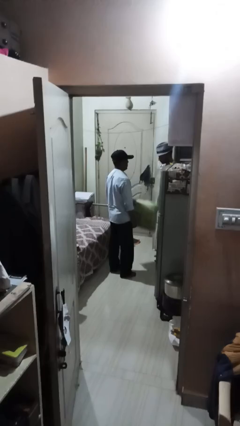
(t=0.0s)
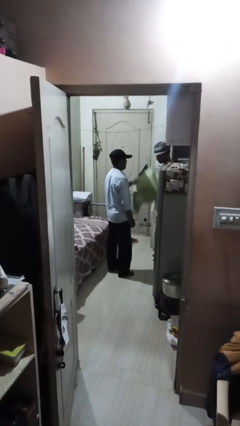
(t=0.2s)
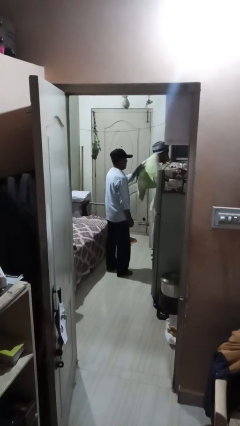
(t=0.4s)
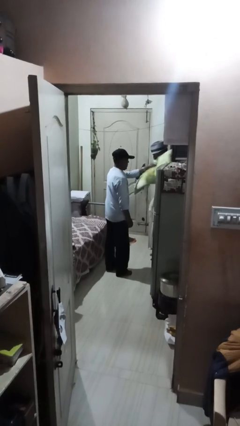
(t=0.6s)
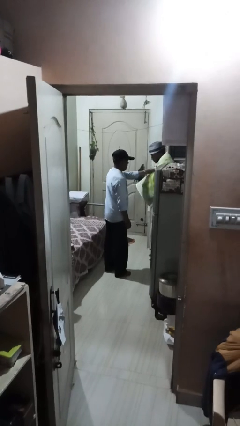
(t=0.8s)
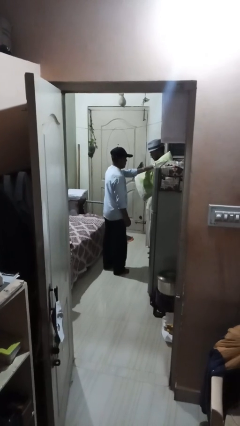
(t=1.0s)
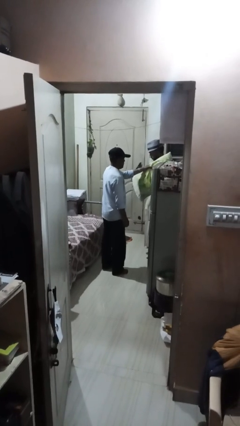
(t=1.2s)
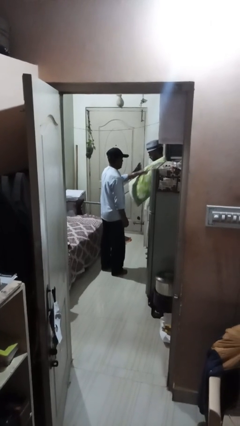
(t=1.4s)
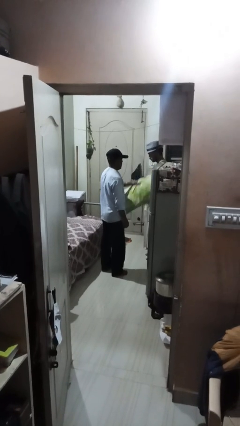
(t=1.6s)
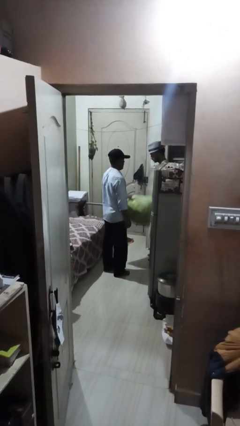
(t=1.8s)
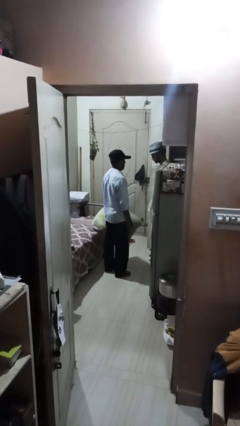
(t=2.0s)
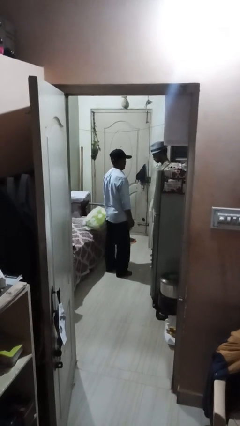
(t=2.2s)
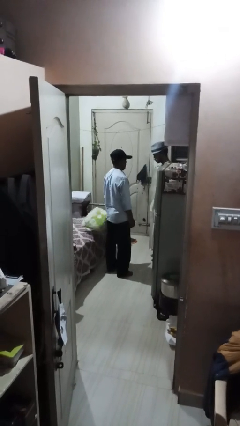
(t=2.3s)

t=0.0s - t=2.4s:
person hits person with pillow

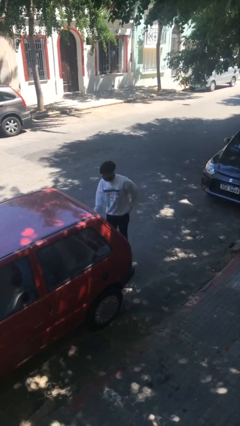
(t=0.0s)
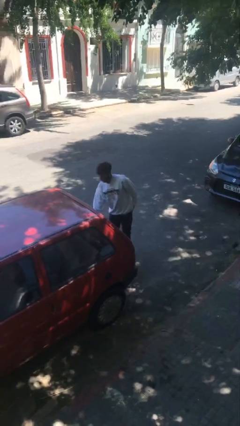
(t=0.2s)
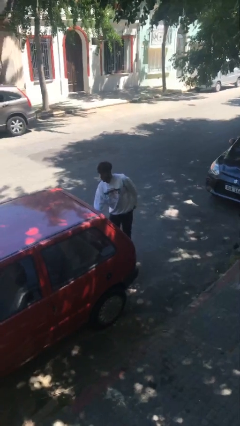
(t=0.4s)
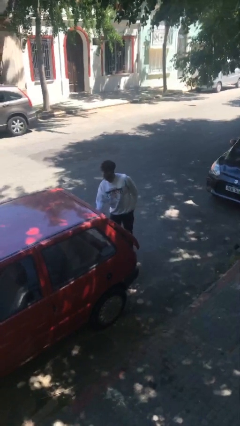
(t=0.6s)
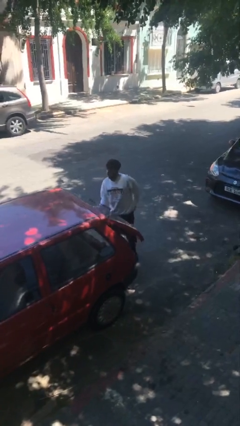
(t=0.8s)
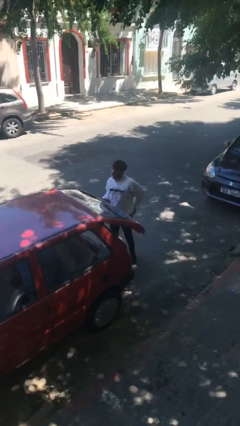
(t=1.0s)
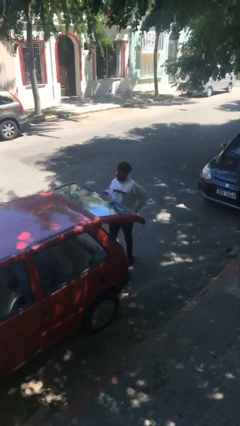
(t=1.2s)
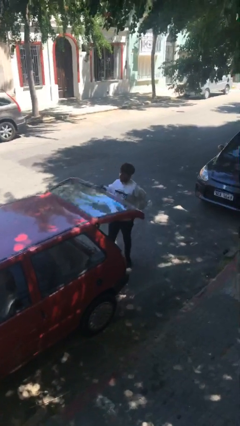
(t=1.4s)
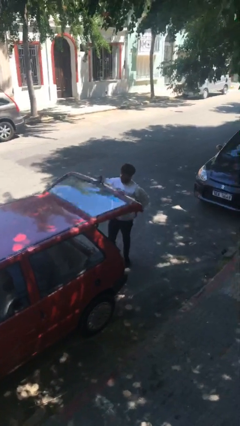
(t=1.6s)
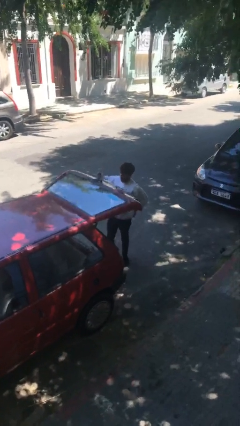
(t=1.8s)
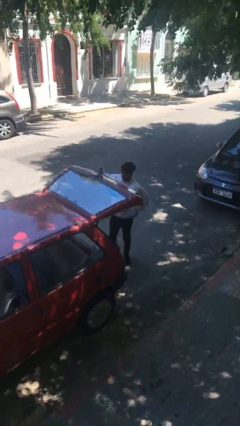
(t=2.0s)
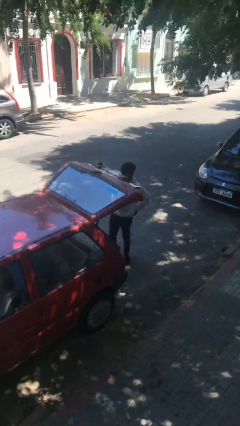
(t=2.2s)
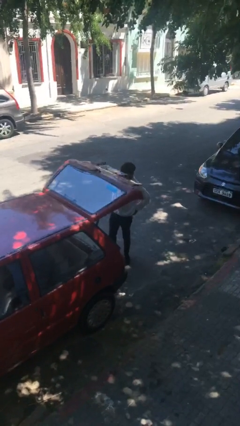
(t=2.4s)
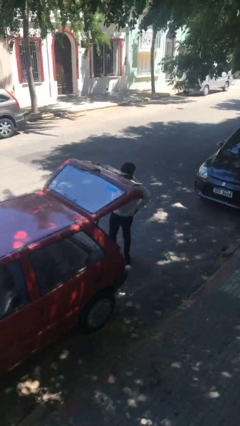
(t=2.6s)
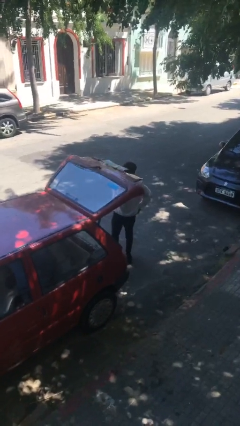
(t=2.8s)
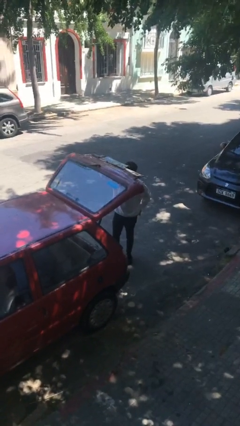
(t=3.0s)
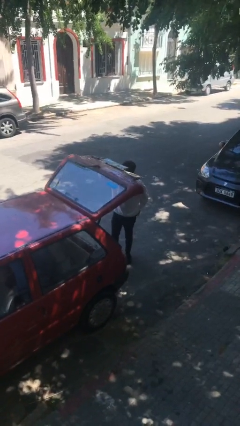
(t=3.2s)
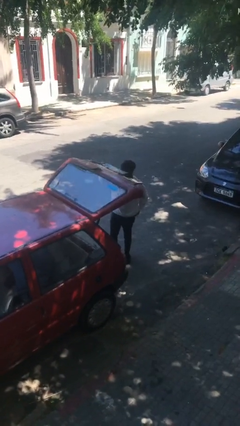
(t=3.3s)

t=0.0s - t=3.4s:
person opens car trunk

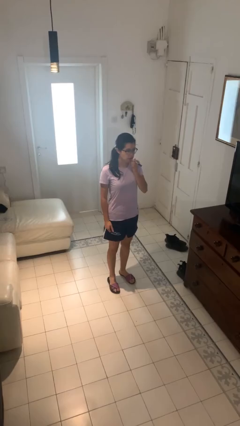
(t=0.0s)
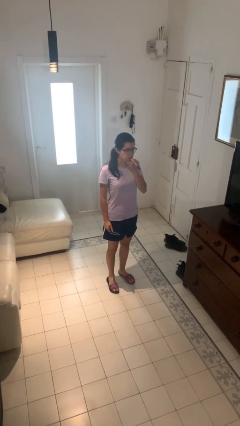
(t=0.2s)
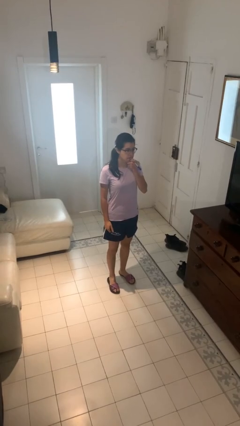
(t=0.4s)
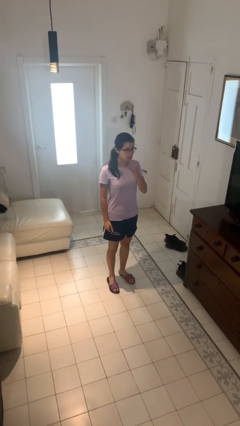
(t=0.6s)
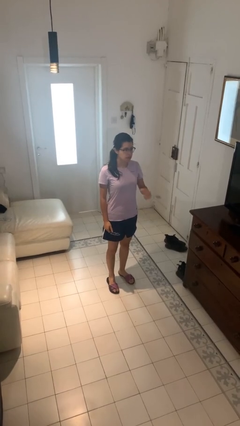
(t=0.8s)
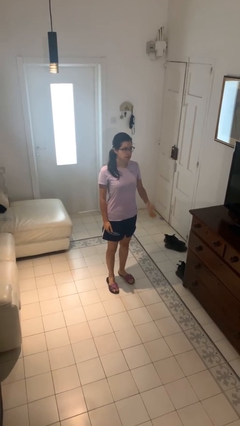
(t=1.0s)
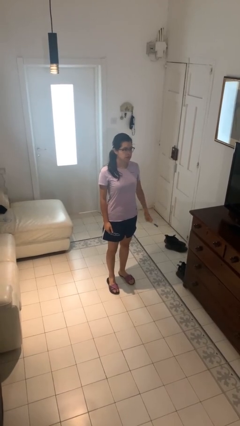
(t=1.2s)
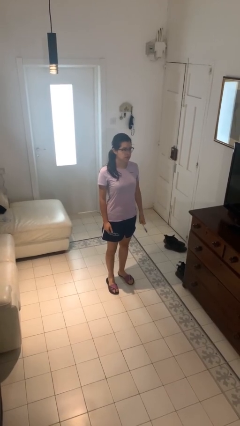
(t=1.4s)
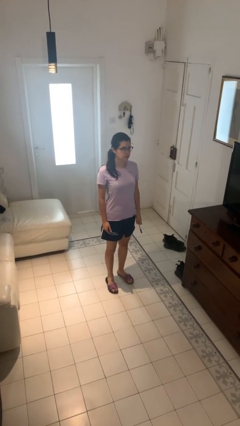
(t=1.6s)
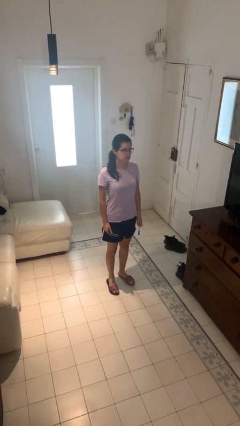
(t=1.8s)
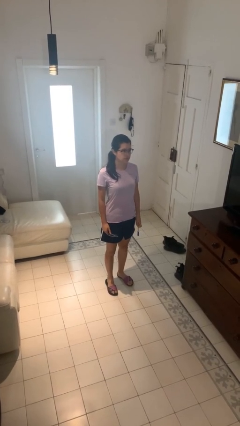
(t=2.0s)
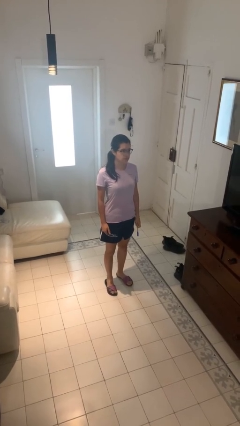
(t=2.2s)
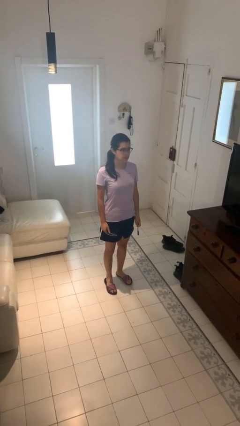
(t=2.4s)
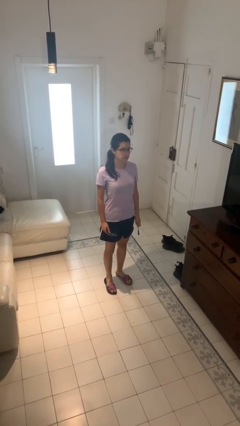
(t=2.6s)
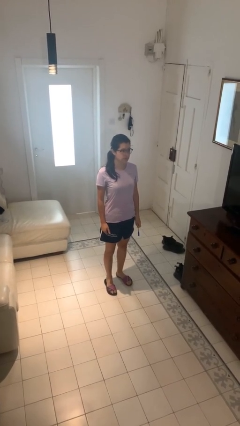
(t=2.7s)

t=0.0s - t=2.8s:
person vapes

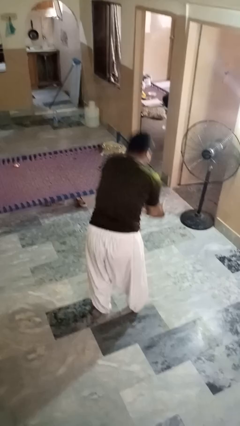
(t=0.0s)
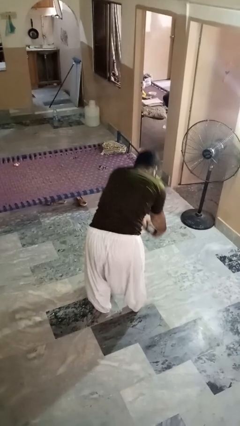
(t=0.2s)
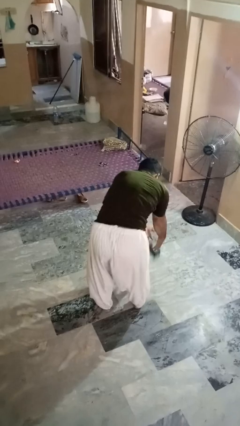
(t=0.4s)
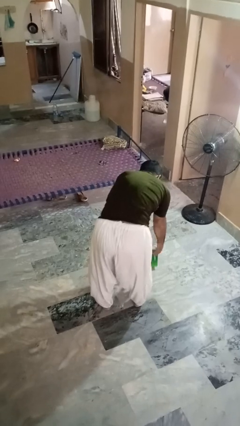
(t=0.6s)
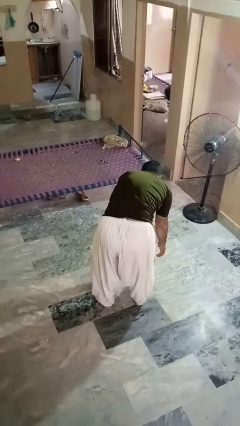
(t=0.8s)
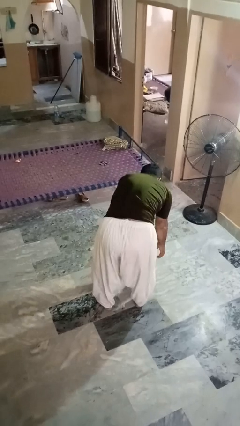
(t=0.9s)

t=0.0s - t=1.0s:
person catches dropped object

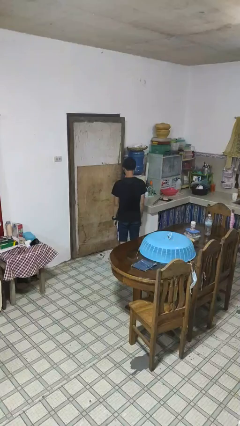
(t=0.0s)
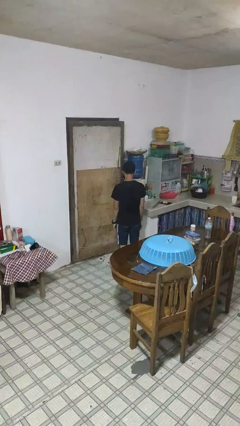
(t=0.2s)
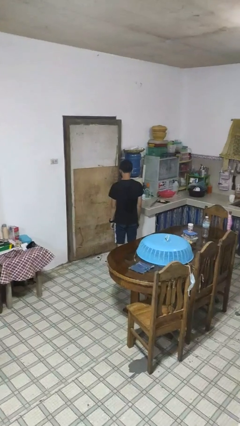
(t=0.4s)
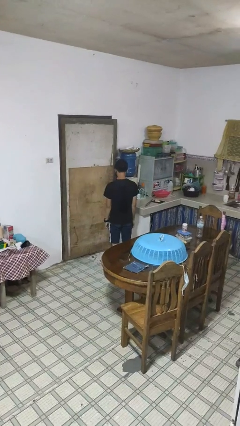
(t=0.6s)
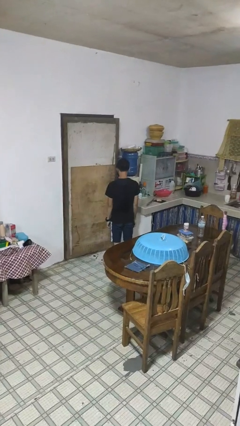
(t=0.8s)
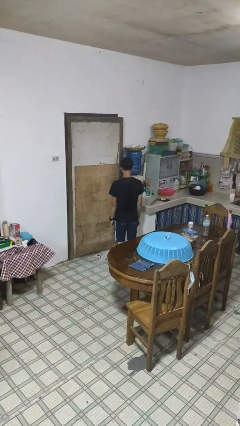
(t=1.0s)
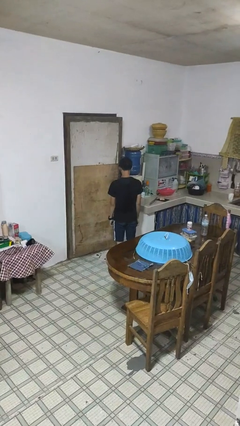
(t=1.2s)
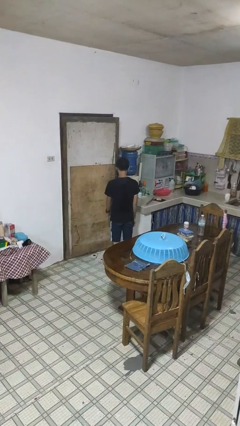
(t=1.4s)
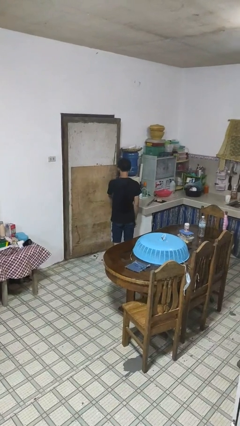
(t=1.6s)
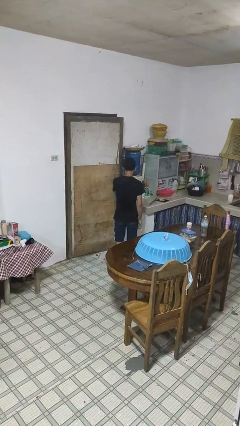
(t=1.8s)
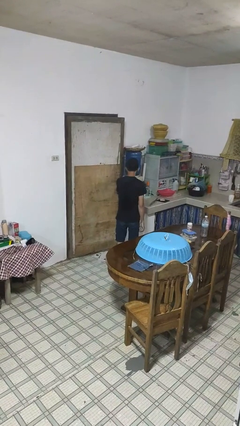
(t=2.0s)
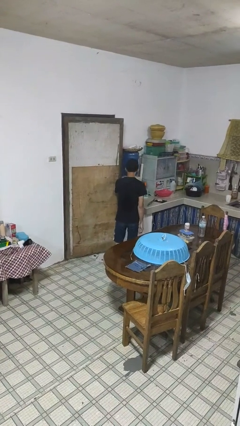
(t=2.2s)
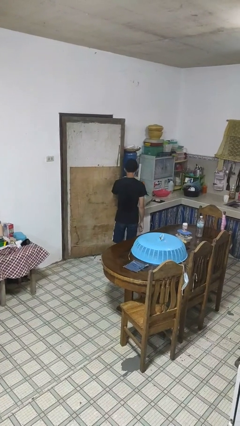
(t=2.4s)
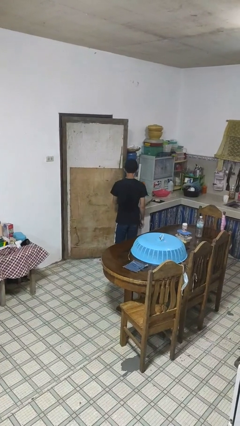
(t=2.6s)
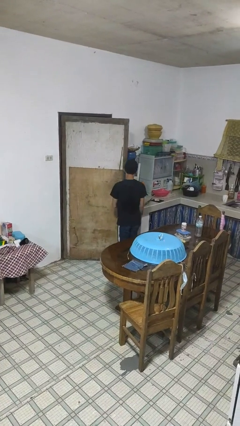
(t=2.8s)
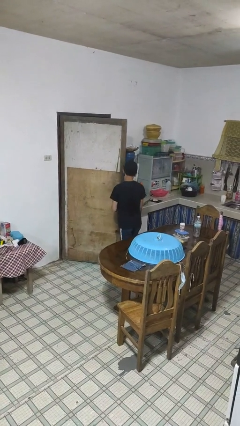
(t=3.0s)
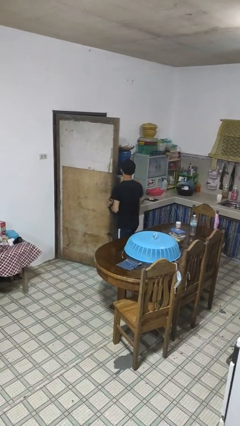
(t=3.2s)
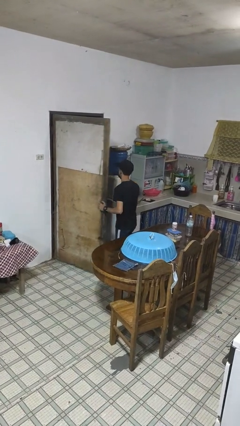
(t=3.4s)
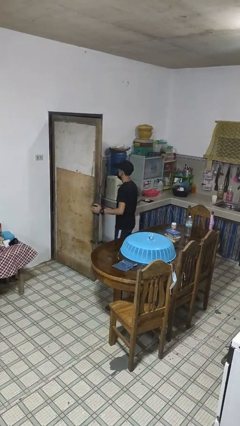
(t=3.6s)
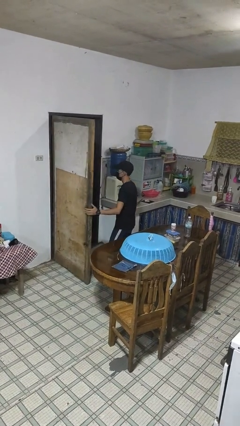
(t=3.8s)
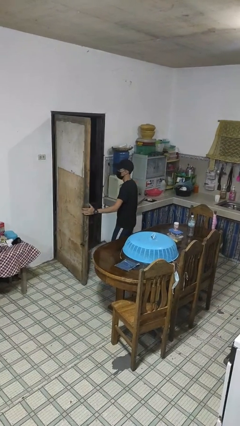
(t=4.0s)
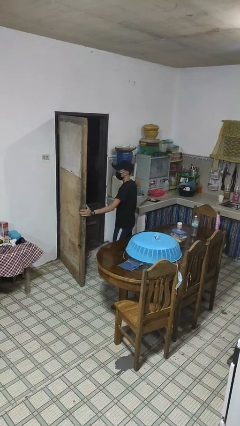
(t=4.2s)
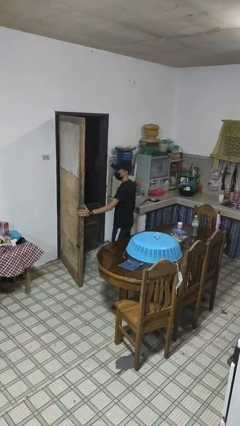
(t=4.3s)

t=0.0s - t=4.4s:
person opens facility door

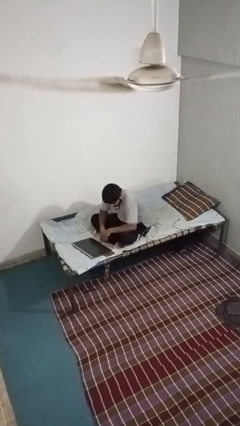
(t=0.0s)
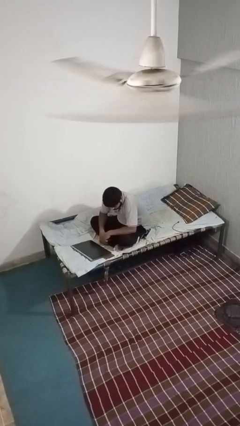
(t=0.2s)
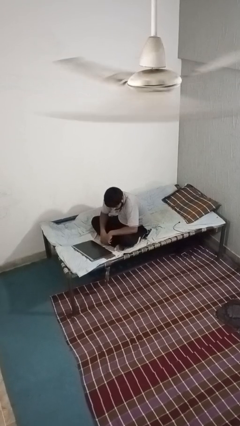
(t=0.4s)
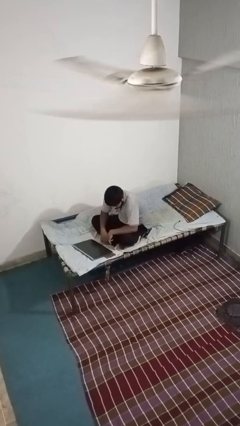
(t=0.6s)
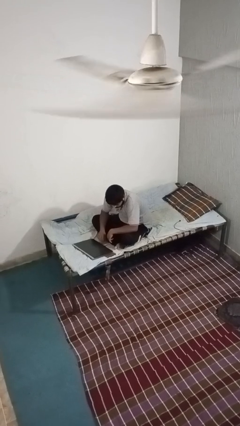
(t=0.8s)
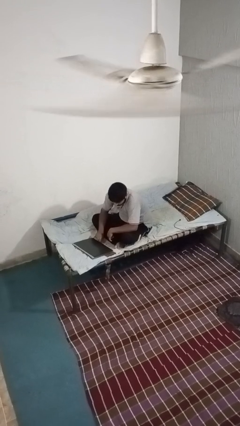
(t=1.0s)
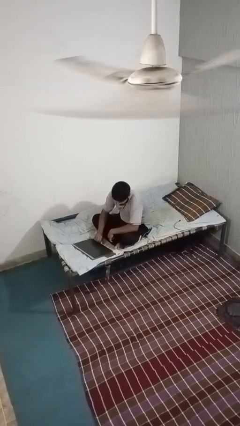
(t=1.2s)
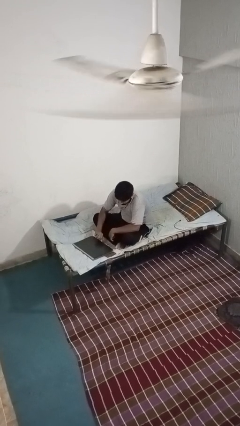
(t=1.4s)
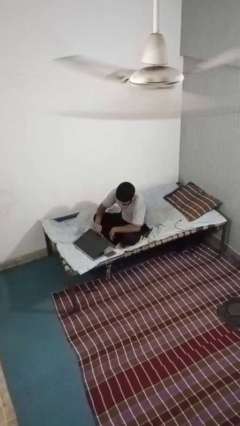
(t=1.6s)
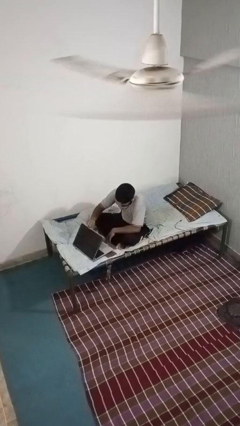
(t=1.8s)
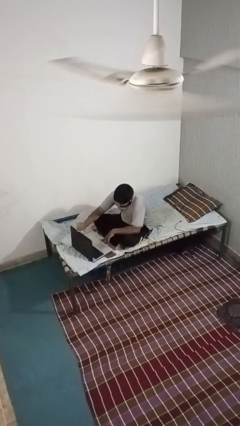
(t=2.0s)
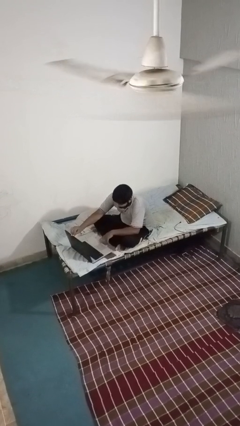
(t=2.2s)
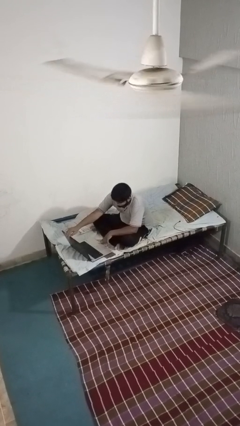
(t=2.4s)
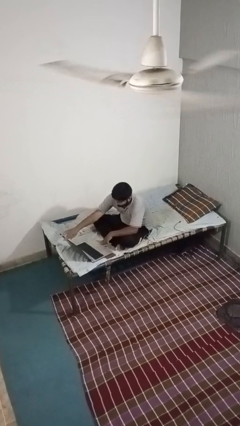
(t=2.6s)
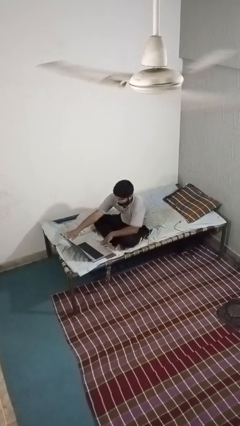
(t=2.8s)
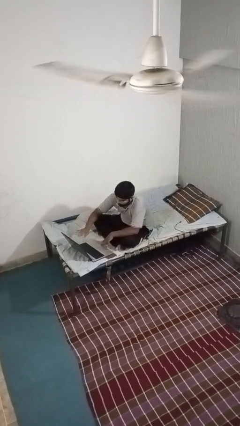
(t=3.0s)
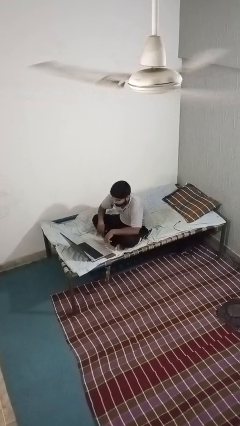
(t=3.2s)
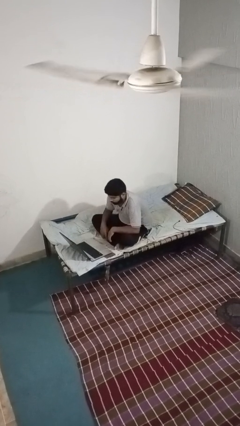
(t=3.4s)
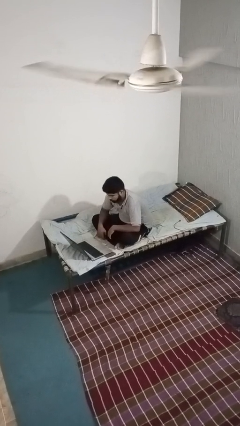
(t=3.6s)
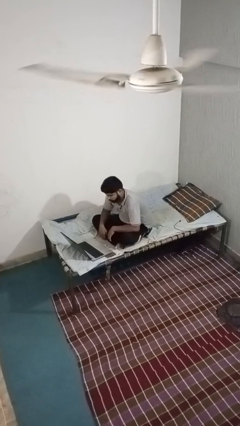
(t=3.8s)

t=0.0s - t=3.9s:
person opens laptop

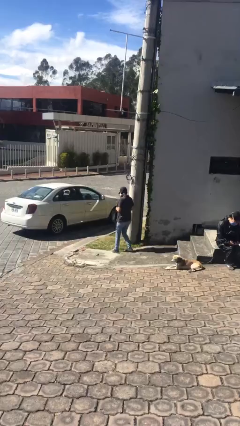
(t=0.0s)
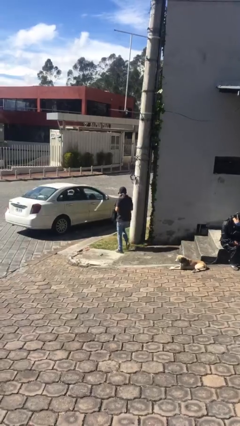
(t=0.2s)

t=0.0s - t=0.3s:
person steals object from person
